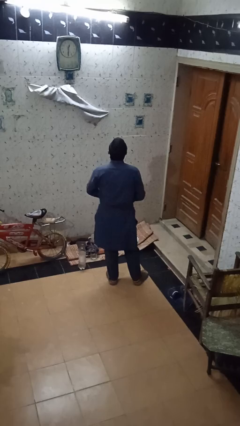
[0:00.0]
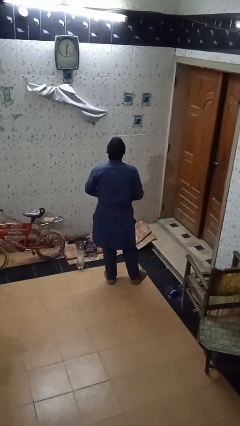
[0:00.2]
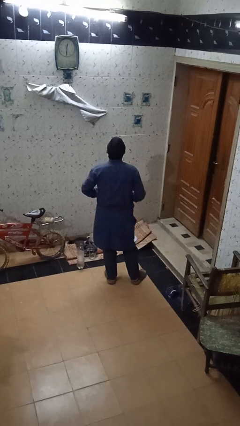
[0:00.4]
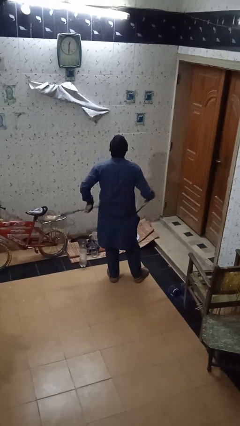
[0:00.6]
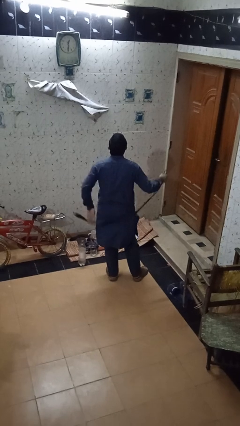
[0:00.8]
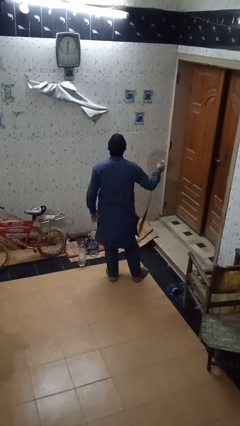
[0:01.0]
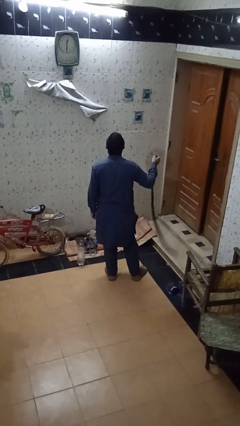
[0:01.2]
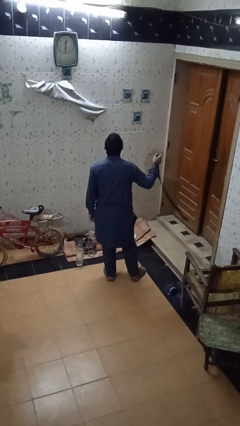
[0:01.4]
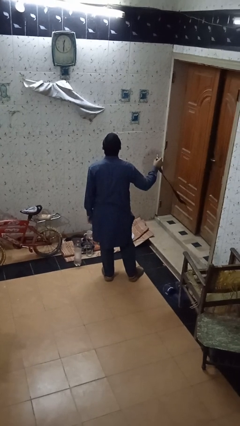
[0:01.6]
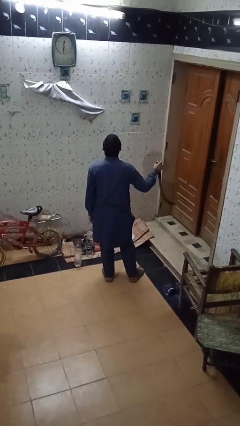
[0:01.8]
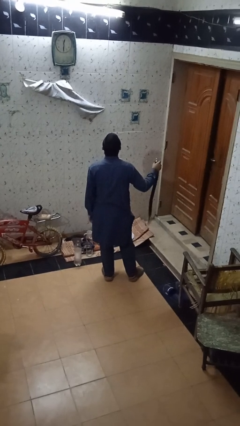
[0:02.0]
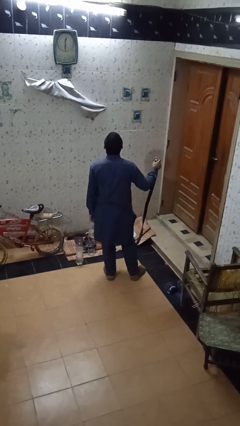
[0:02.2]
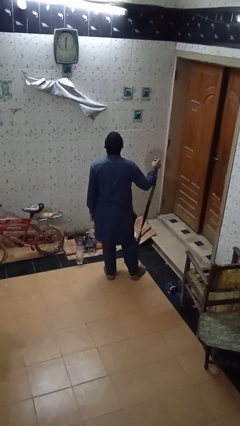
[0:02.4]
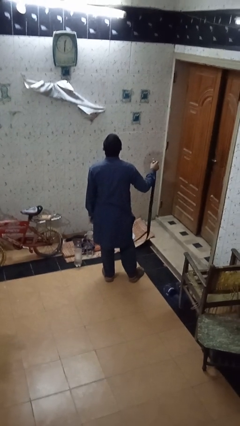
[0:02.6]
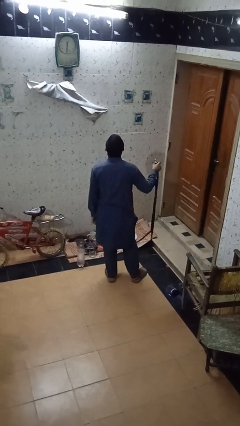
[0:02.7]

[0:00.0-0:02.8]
person takes off belt

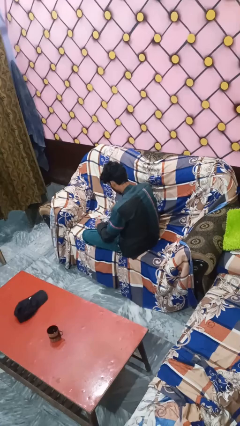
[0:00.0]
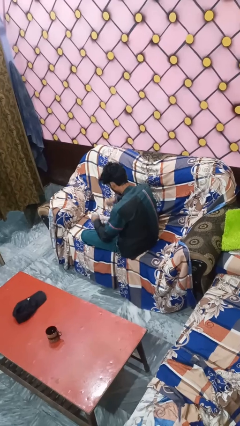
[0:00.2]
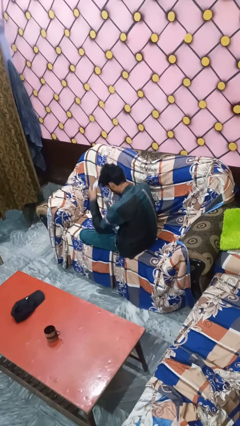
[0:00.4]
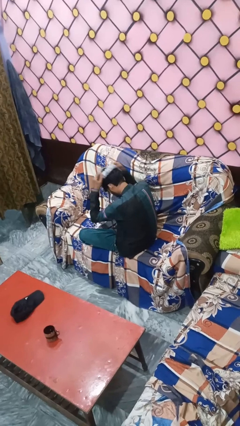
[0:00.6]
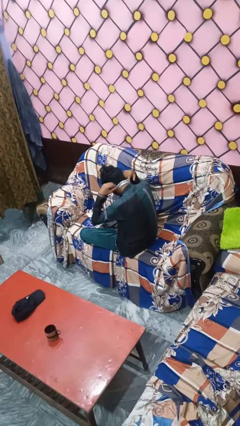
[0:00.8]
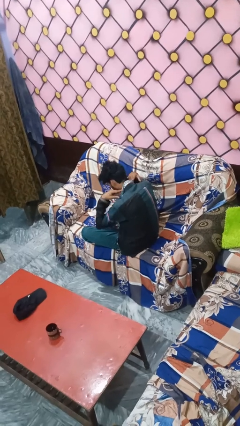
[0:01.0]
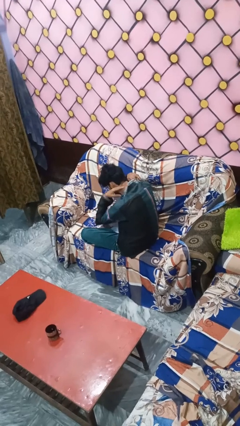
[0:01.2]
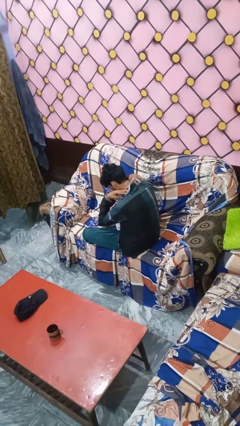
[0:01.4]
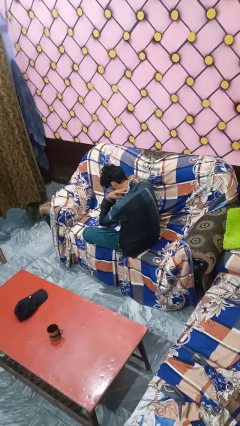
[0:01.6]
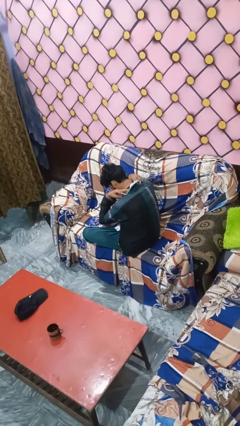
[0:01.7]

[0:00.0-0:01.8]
person puts on necktie

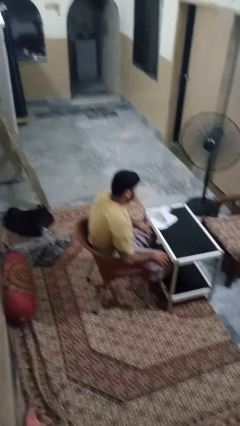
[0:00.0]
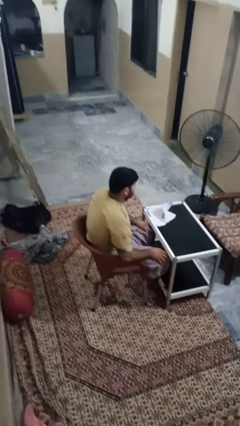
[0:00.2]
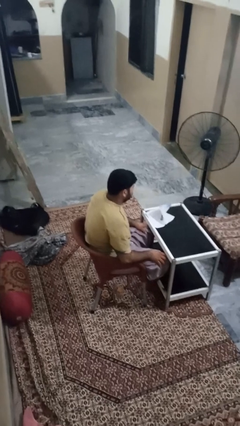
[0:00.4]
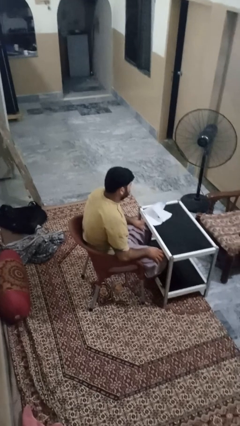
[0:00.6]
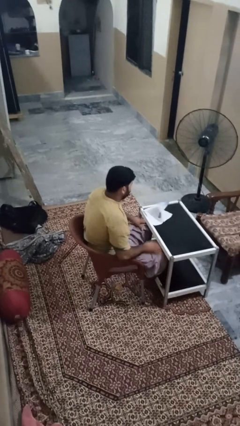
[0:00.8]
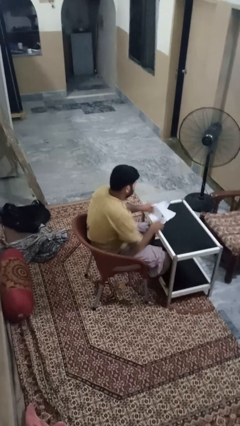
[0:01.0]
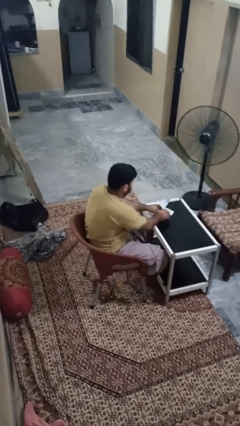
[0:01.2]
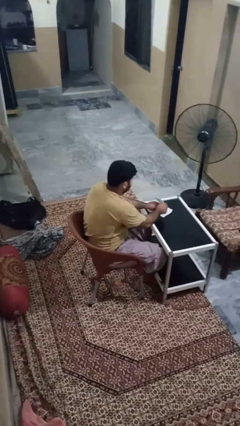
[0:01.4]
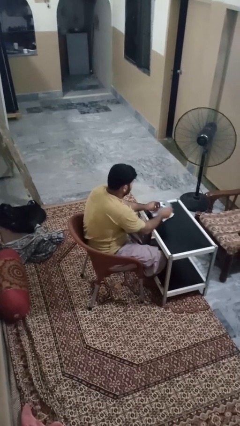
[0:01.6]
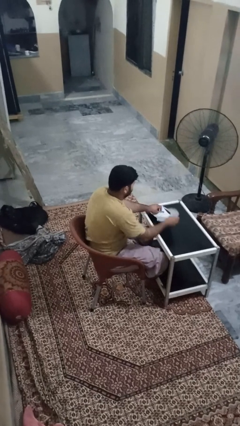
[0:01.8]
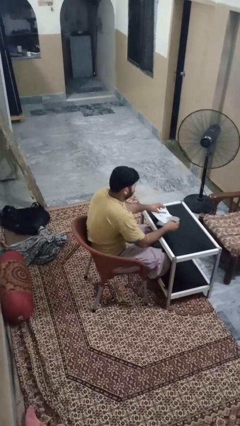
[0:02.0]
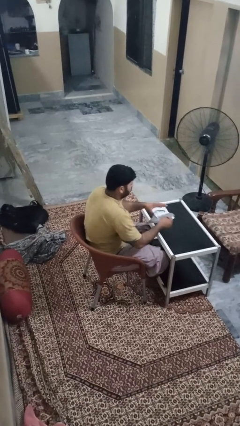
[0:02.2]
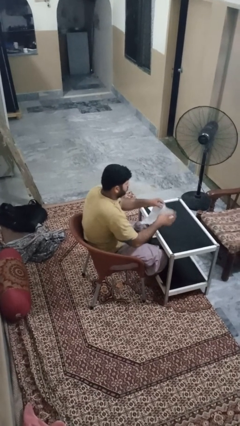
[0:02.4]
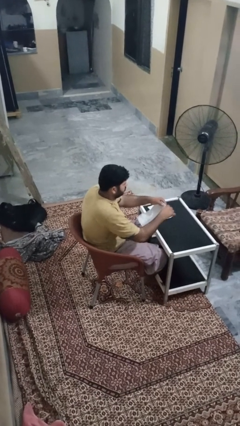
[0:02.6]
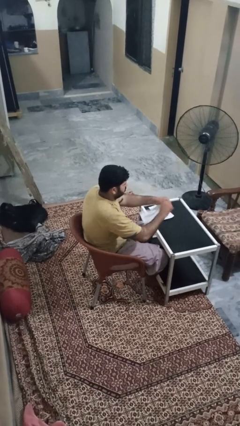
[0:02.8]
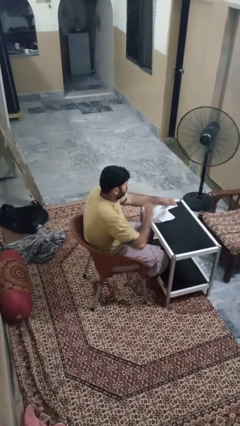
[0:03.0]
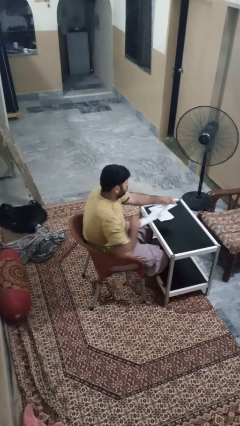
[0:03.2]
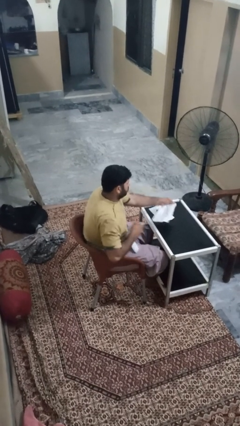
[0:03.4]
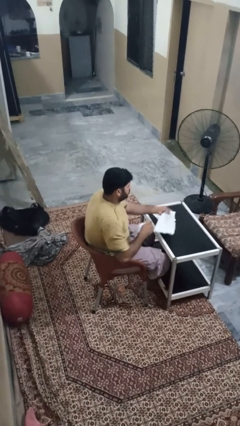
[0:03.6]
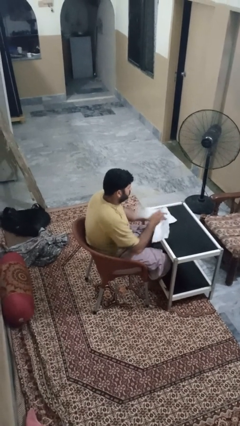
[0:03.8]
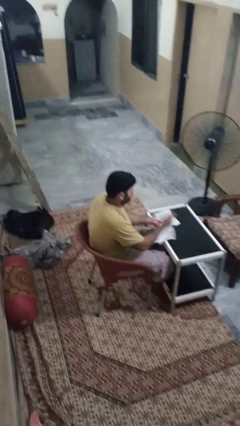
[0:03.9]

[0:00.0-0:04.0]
person tears paper

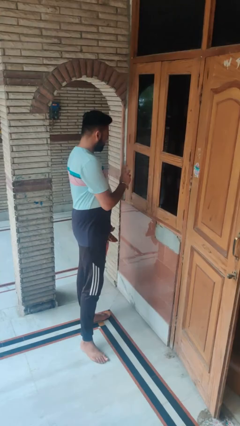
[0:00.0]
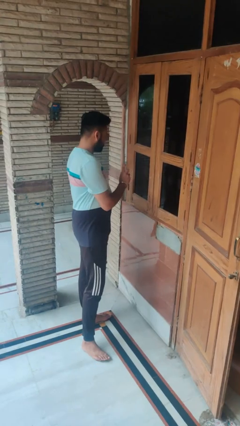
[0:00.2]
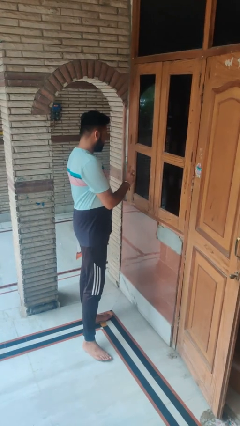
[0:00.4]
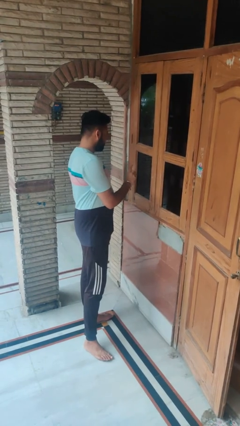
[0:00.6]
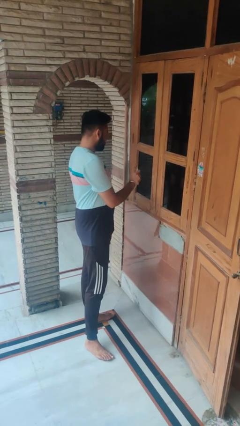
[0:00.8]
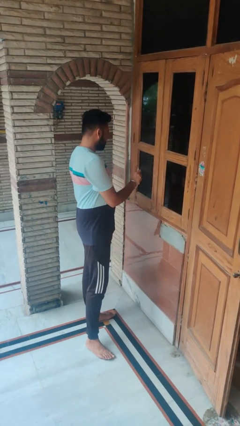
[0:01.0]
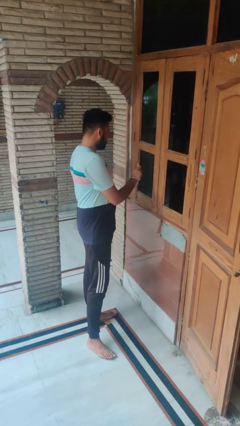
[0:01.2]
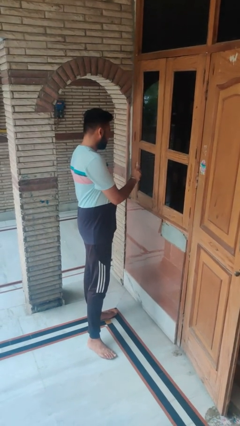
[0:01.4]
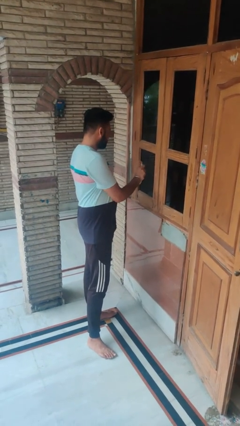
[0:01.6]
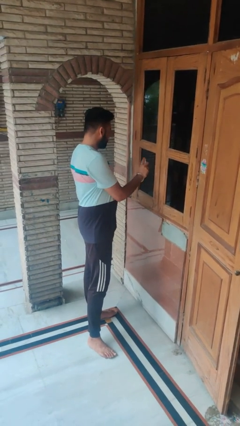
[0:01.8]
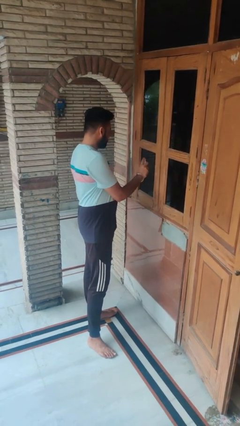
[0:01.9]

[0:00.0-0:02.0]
person sprays from bottle

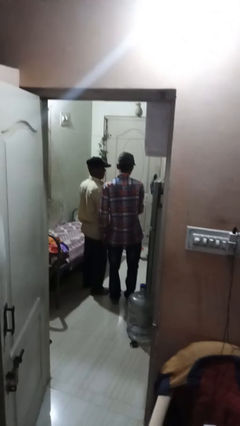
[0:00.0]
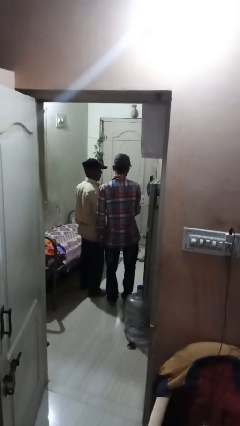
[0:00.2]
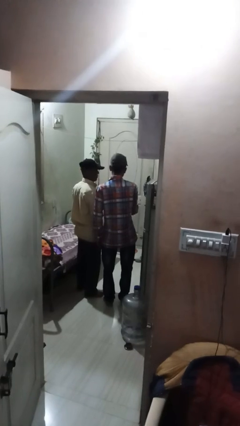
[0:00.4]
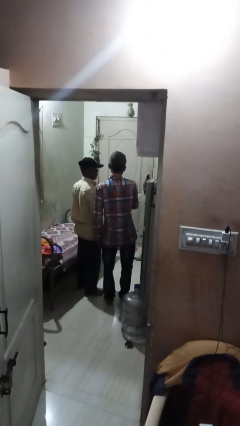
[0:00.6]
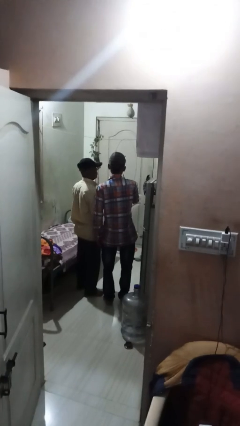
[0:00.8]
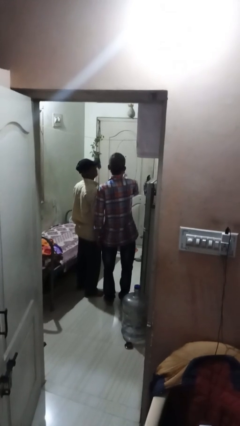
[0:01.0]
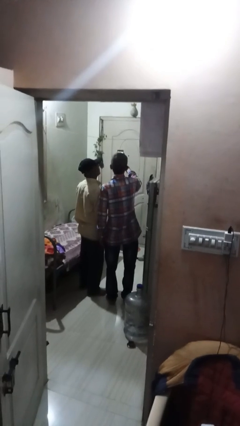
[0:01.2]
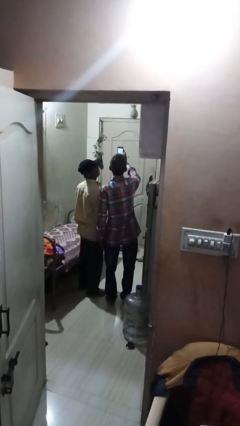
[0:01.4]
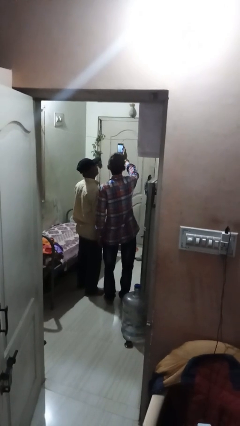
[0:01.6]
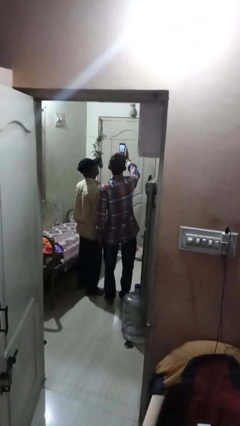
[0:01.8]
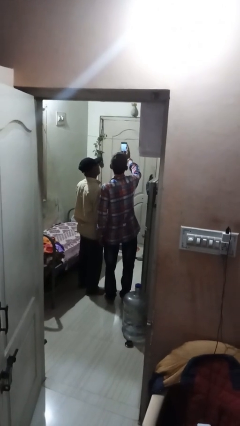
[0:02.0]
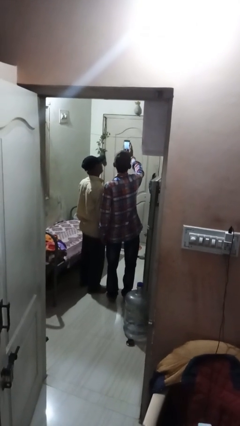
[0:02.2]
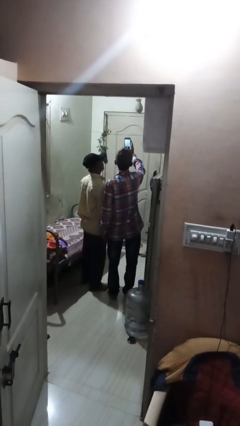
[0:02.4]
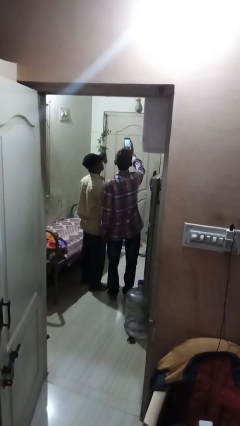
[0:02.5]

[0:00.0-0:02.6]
person takes selfie with person

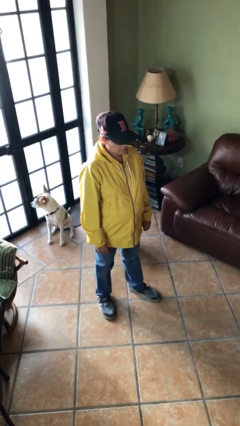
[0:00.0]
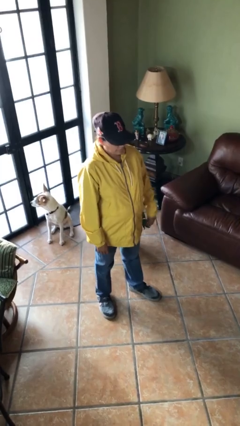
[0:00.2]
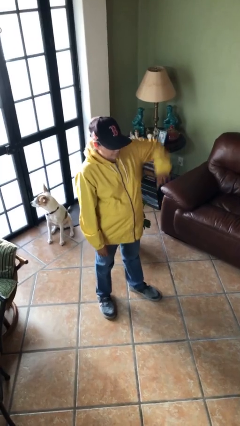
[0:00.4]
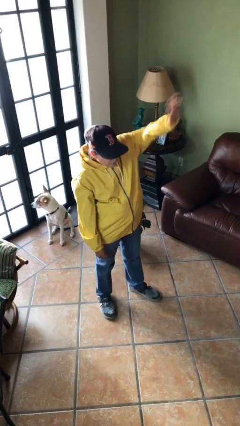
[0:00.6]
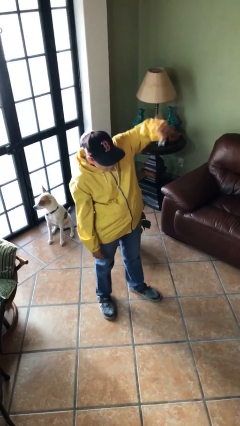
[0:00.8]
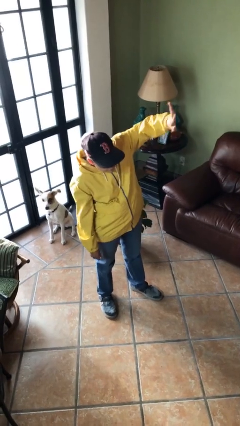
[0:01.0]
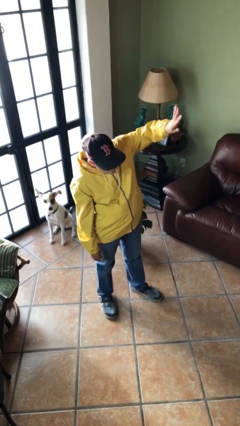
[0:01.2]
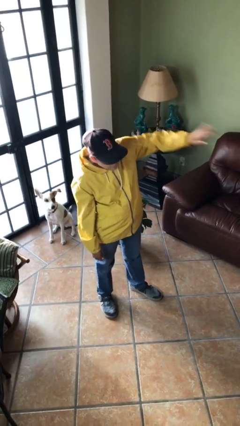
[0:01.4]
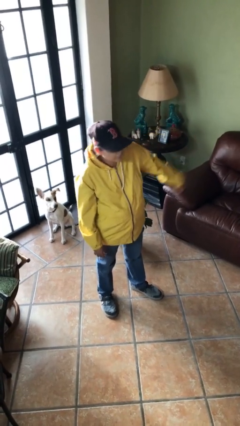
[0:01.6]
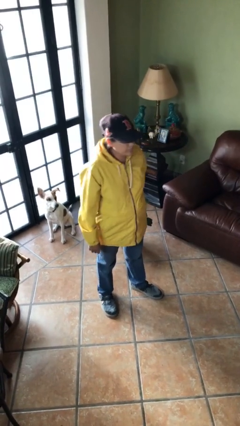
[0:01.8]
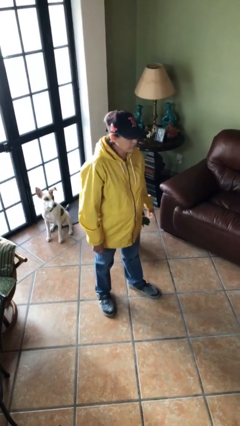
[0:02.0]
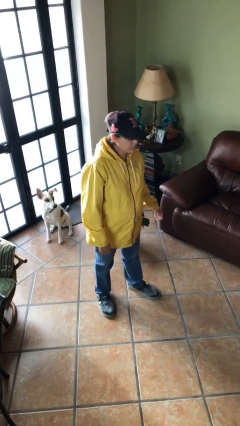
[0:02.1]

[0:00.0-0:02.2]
person waves at person

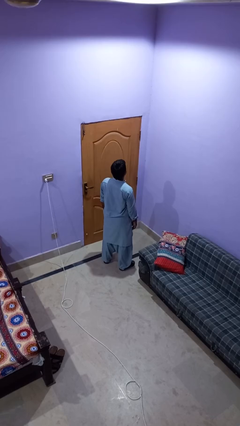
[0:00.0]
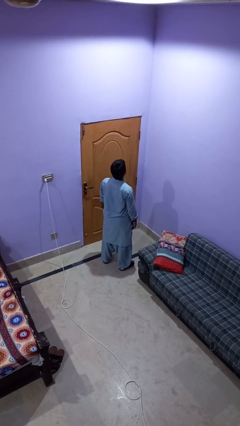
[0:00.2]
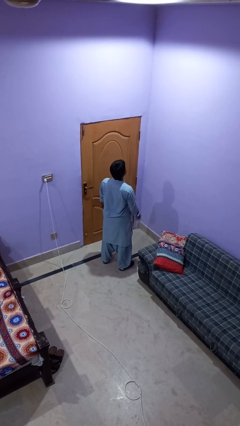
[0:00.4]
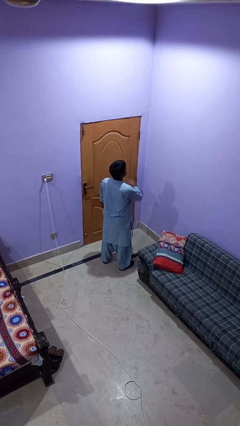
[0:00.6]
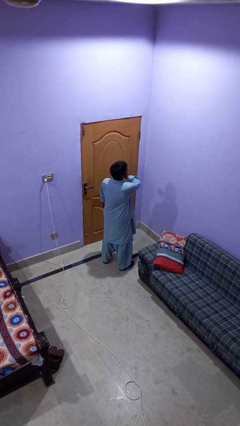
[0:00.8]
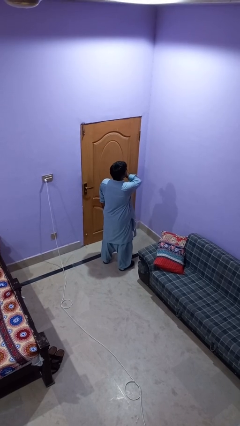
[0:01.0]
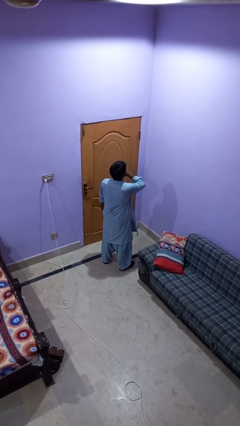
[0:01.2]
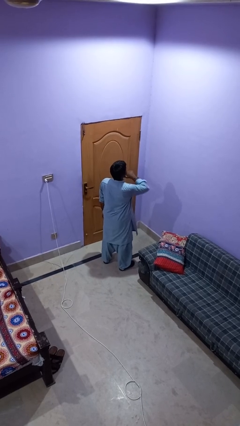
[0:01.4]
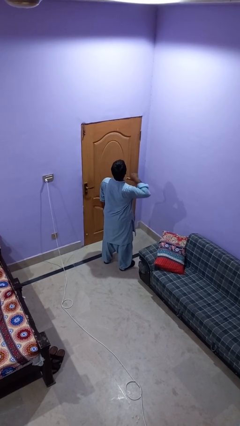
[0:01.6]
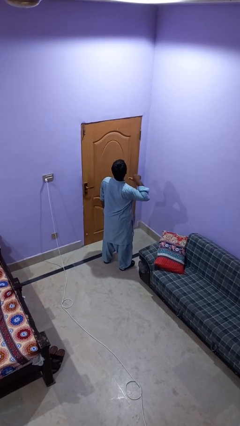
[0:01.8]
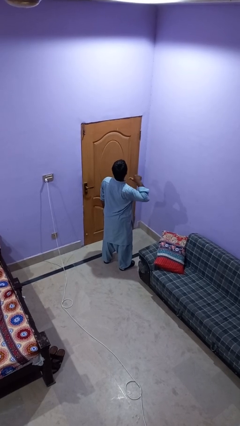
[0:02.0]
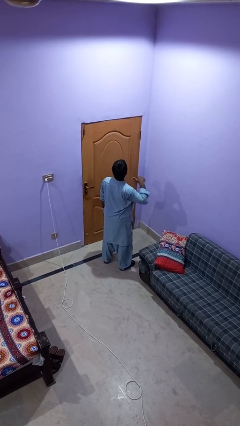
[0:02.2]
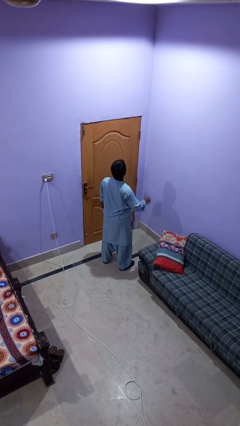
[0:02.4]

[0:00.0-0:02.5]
person gestures cut
